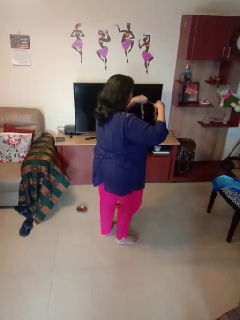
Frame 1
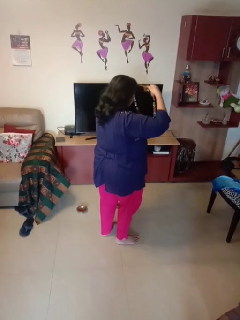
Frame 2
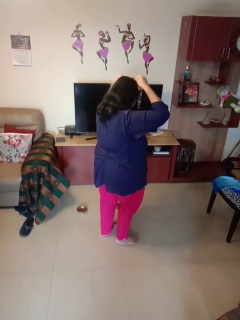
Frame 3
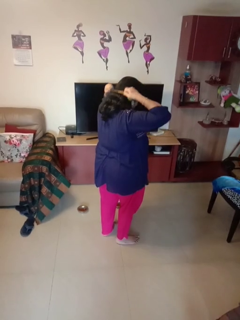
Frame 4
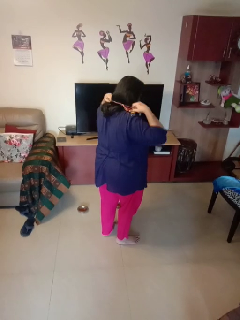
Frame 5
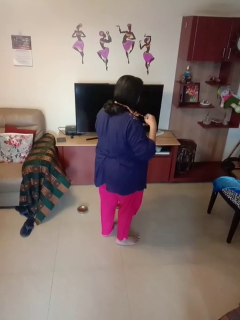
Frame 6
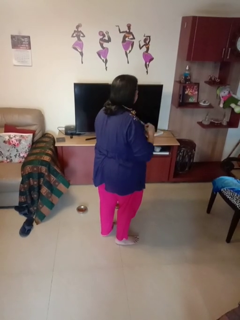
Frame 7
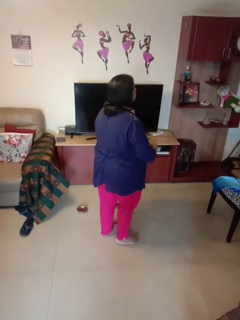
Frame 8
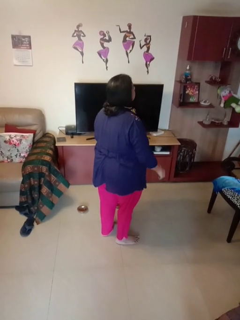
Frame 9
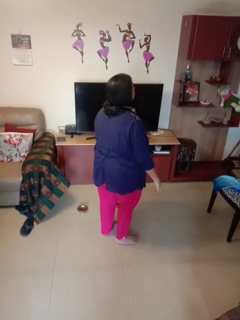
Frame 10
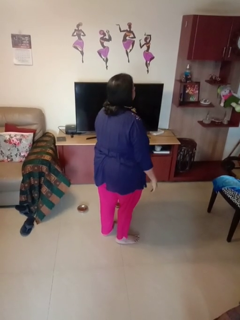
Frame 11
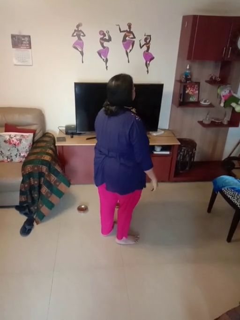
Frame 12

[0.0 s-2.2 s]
person puts on necklace

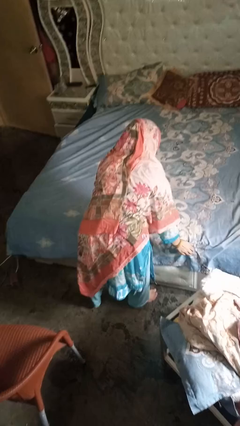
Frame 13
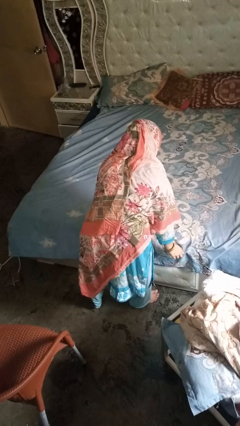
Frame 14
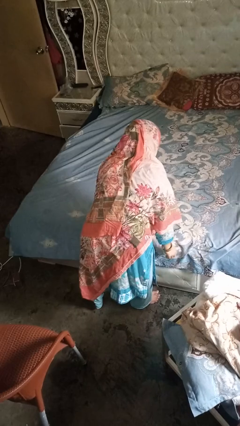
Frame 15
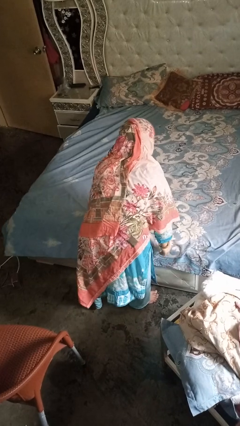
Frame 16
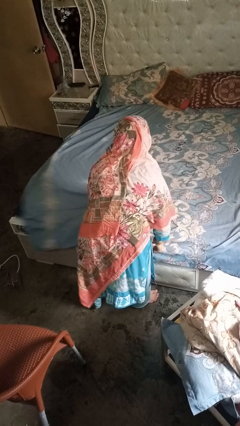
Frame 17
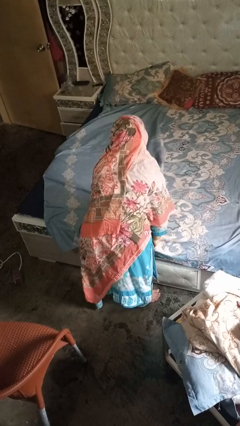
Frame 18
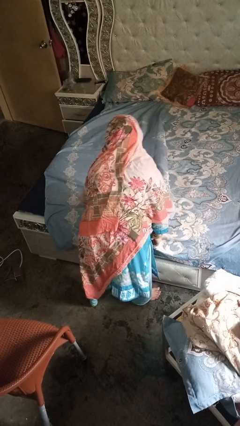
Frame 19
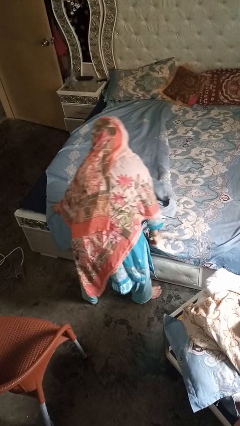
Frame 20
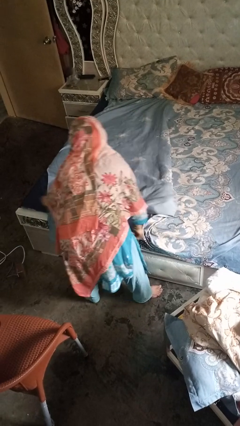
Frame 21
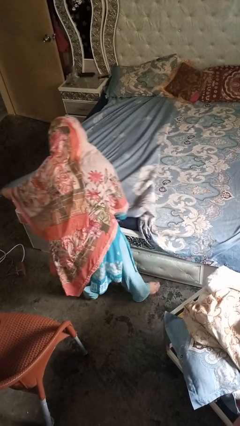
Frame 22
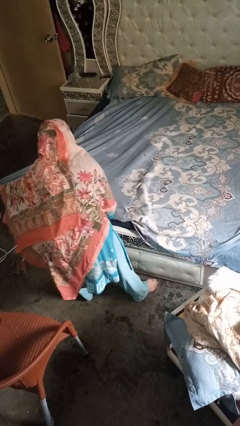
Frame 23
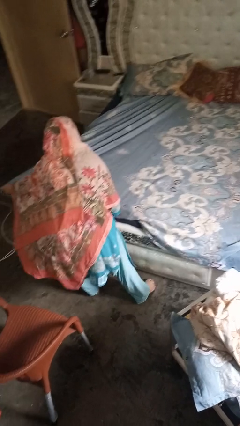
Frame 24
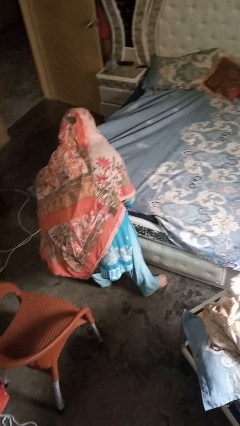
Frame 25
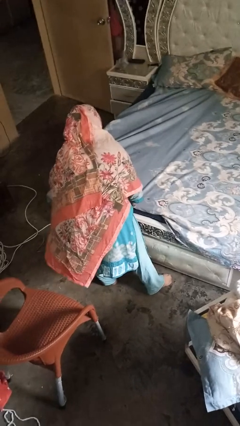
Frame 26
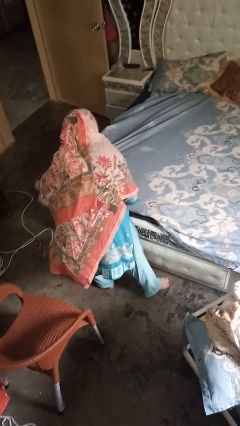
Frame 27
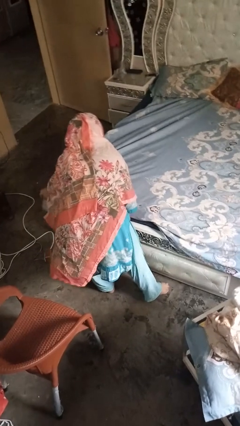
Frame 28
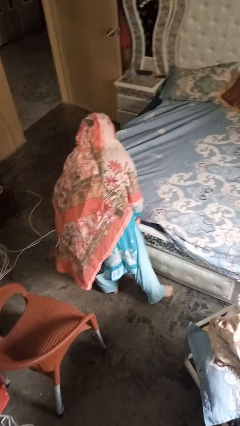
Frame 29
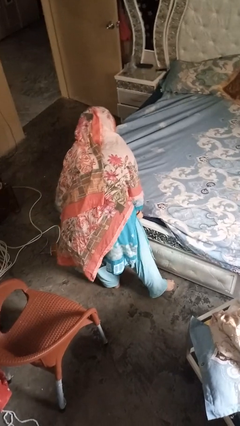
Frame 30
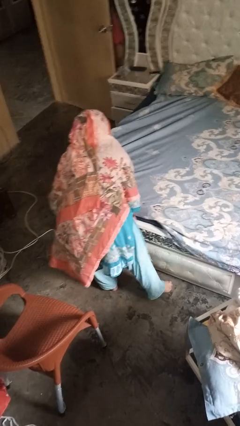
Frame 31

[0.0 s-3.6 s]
person makes bed

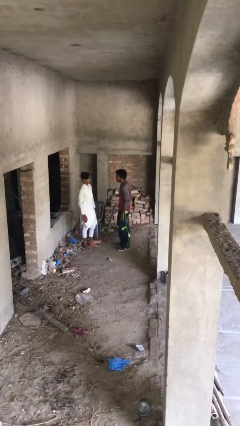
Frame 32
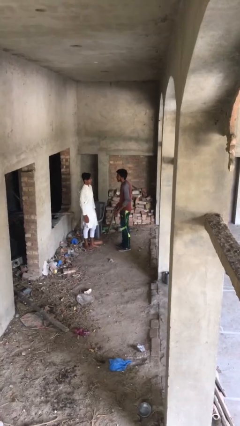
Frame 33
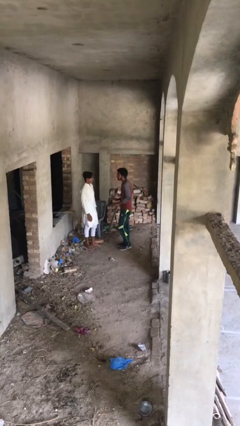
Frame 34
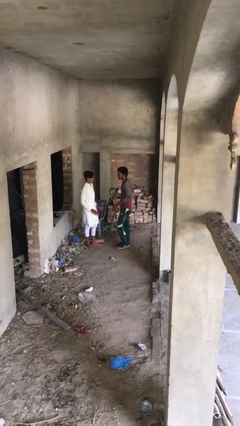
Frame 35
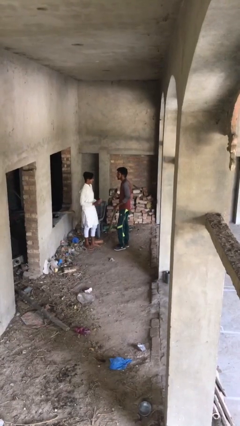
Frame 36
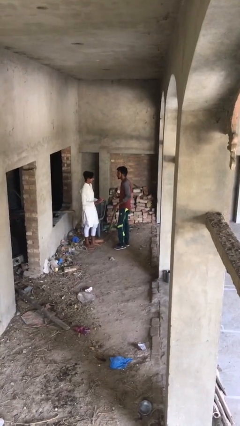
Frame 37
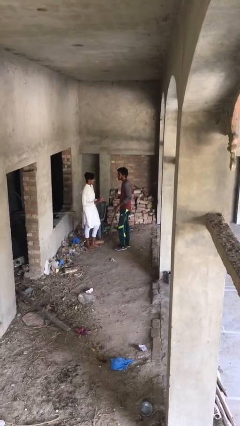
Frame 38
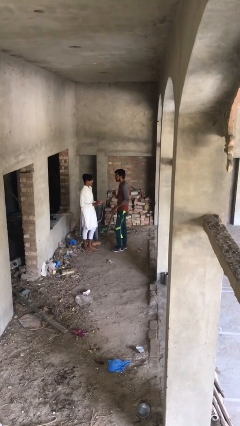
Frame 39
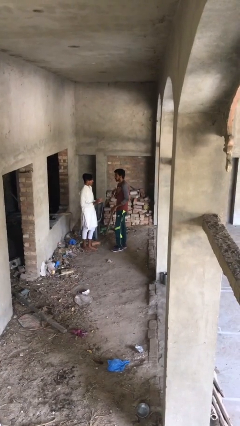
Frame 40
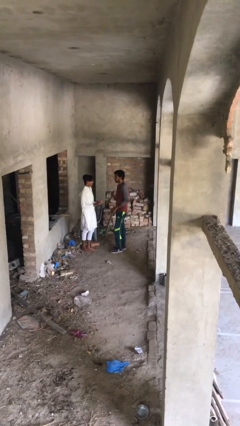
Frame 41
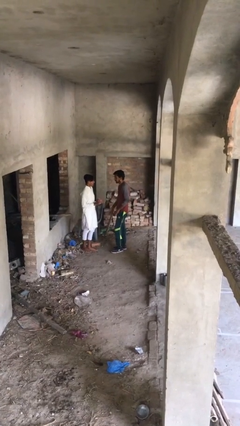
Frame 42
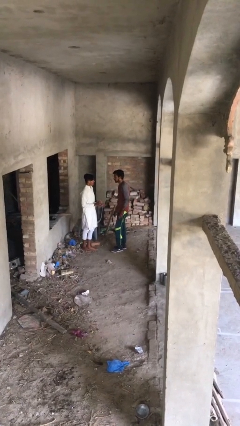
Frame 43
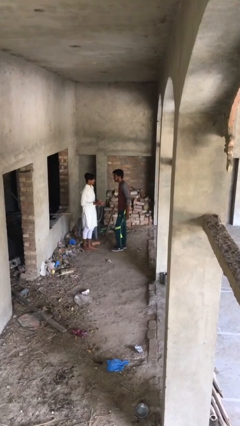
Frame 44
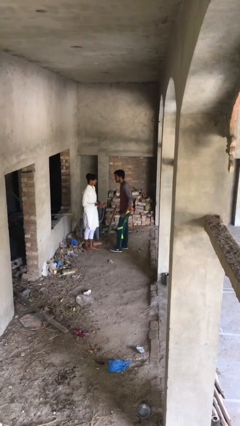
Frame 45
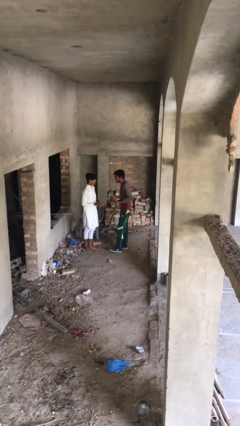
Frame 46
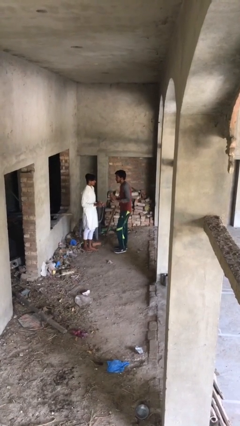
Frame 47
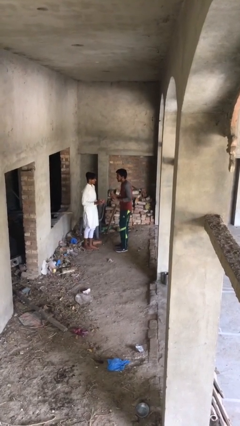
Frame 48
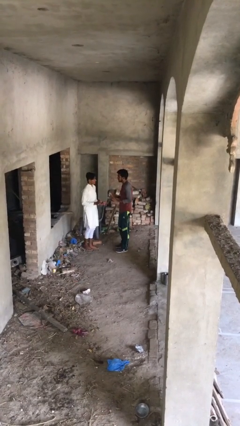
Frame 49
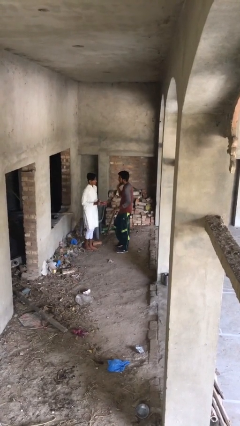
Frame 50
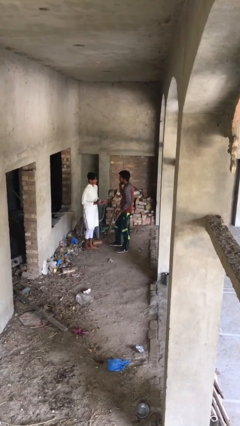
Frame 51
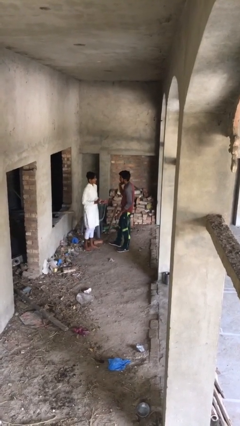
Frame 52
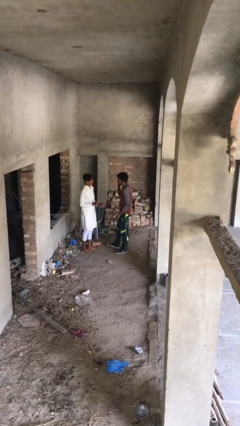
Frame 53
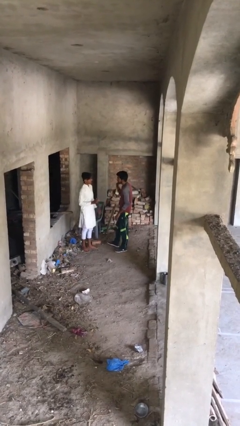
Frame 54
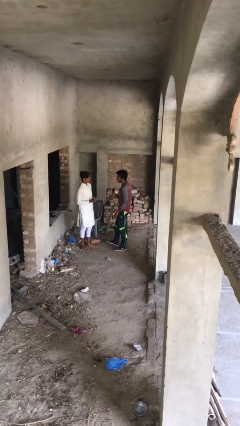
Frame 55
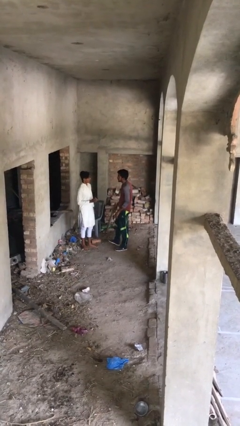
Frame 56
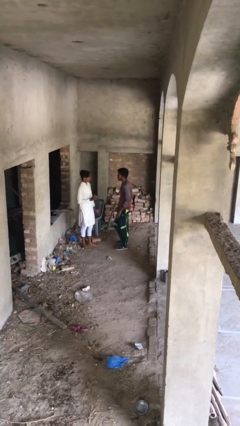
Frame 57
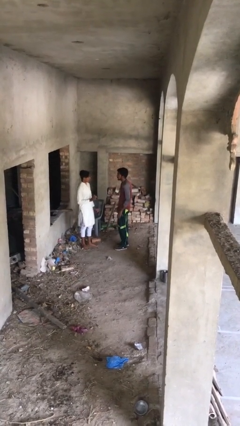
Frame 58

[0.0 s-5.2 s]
person talks to person

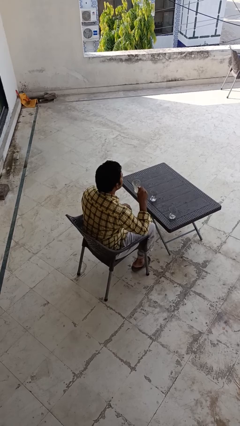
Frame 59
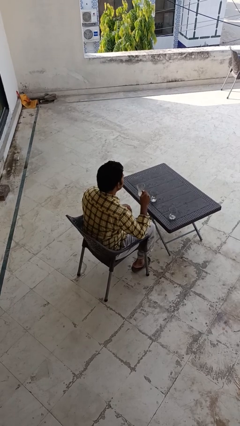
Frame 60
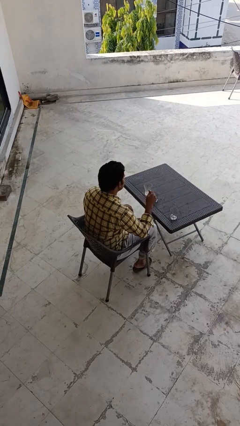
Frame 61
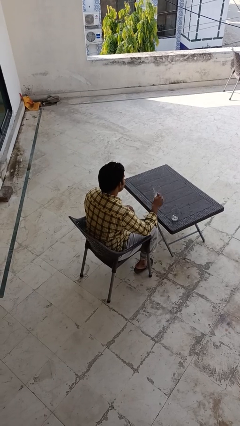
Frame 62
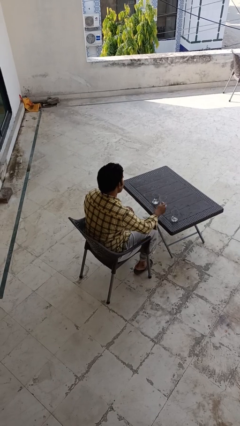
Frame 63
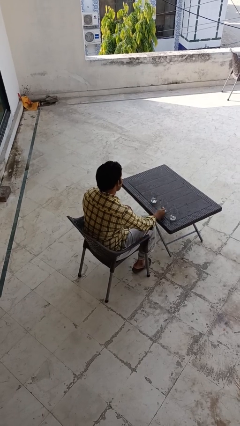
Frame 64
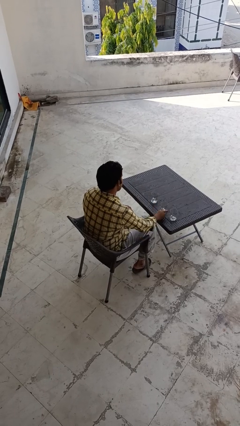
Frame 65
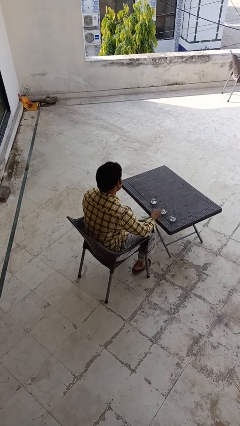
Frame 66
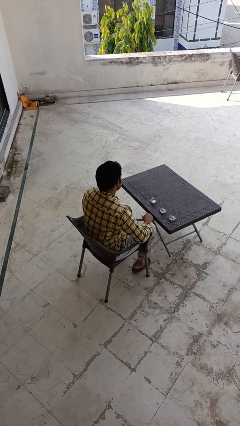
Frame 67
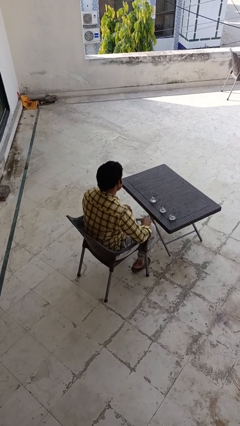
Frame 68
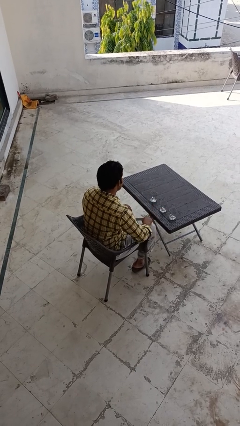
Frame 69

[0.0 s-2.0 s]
person puts down object on table

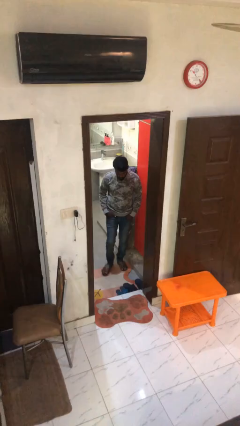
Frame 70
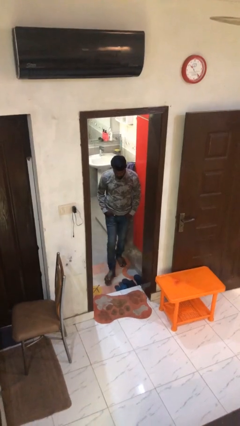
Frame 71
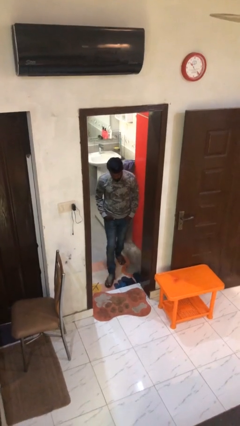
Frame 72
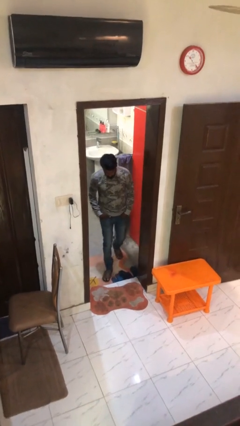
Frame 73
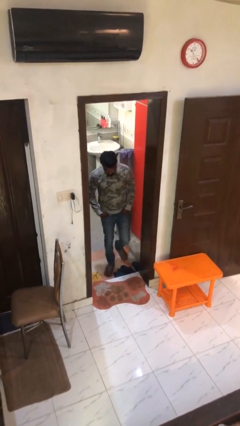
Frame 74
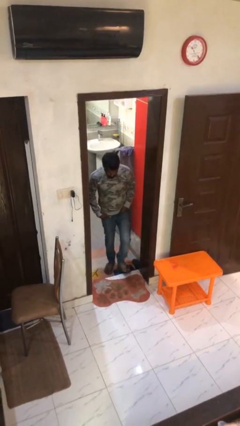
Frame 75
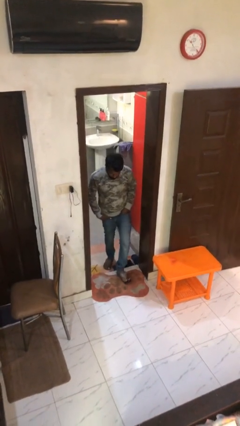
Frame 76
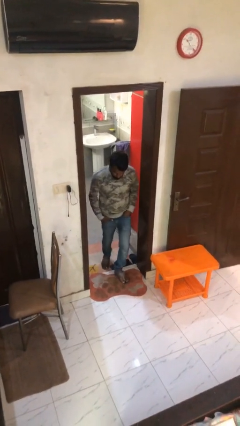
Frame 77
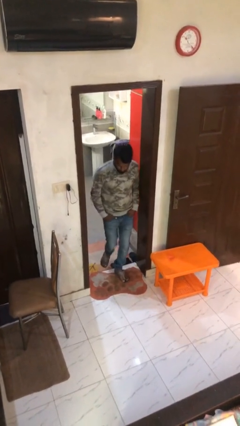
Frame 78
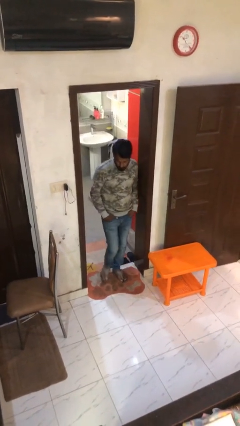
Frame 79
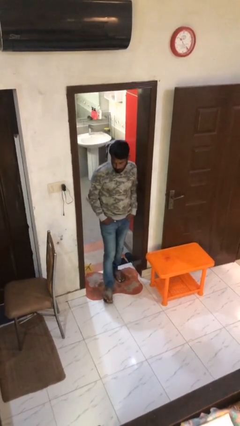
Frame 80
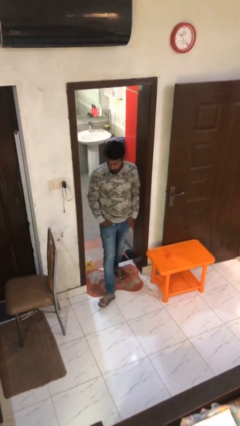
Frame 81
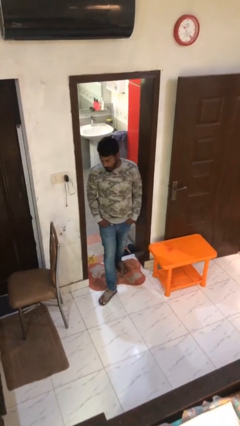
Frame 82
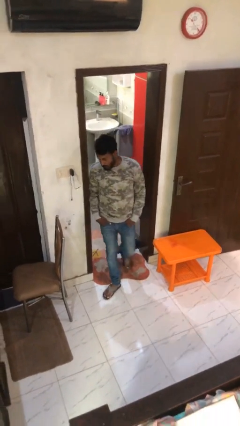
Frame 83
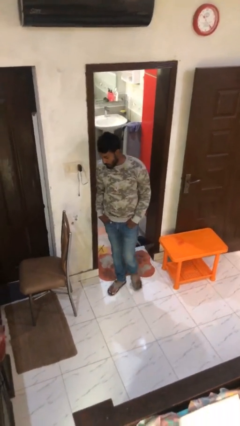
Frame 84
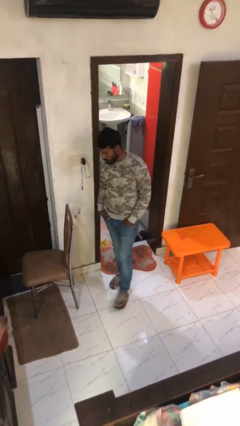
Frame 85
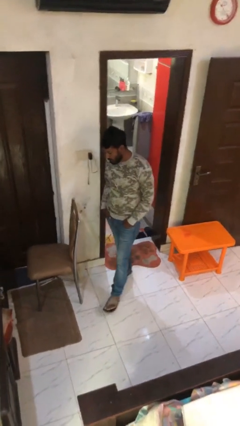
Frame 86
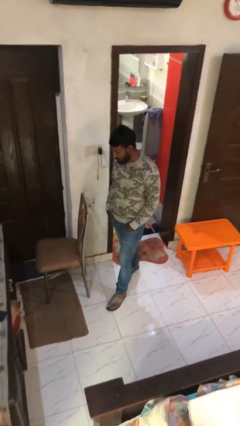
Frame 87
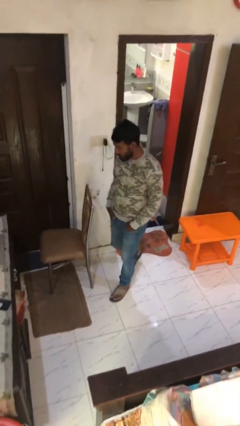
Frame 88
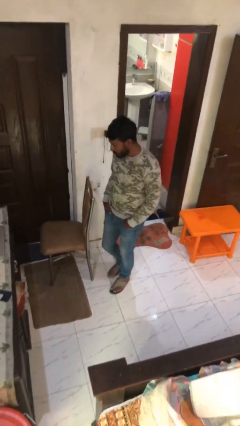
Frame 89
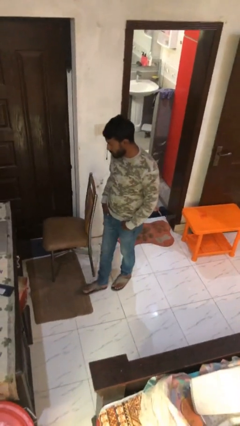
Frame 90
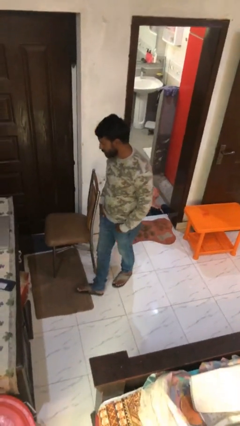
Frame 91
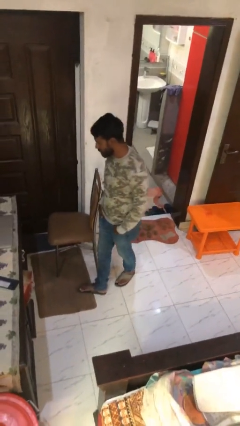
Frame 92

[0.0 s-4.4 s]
person enters scene through structure

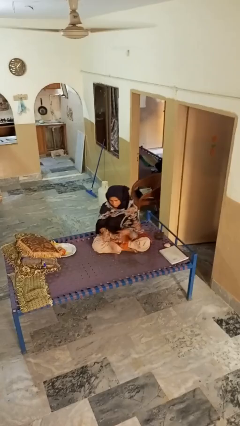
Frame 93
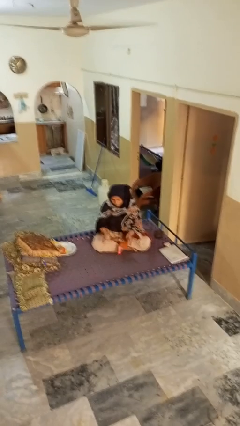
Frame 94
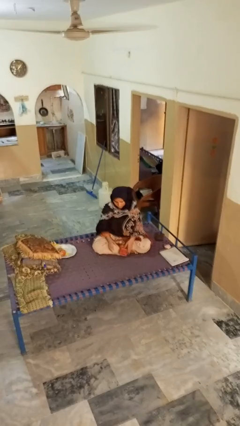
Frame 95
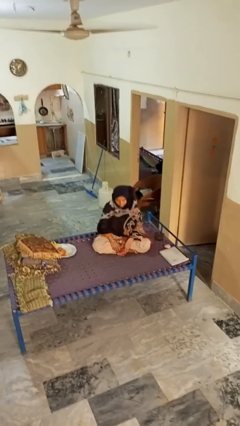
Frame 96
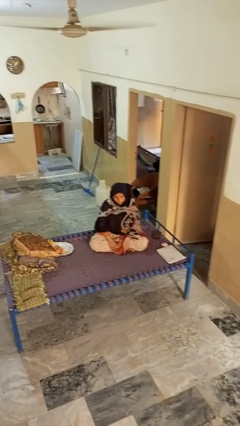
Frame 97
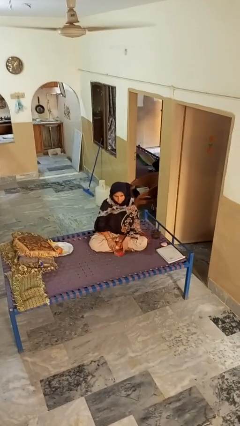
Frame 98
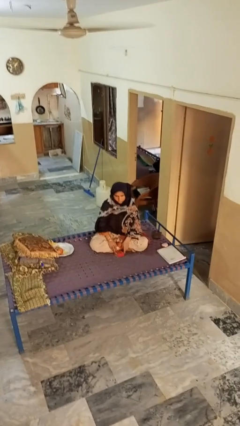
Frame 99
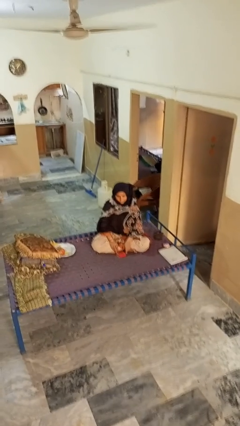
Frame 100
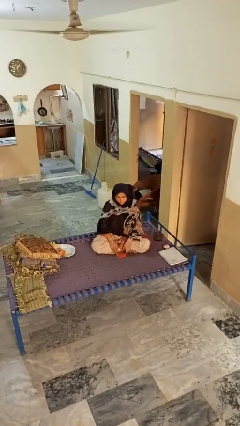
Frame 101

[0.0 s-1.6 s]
person catches dropped object
